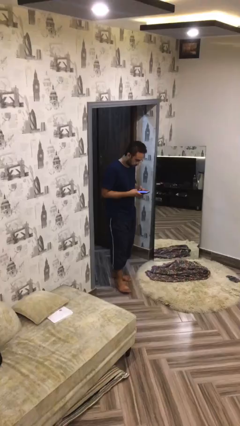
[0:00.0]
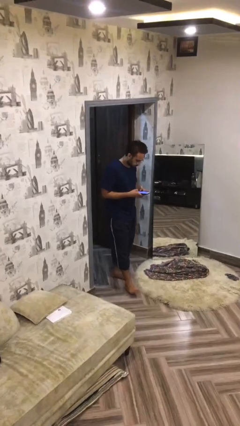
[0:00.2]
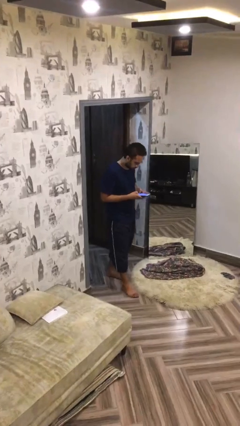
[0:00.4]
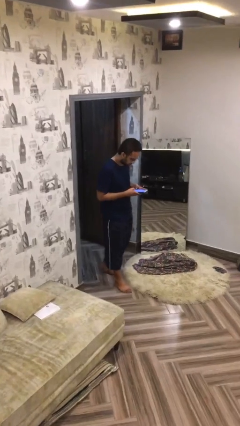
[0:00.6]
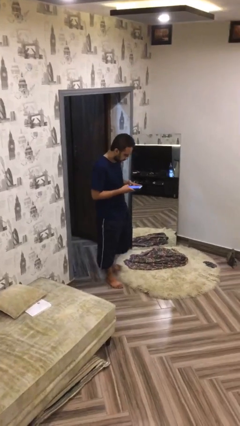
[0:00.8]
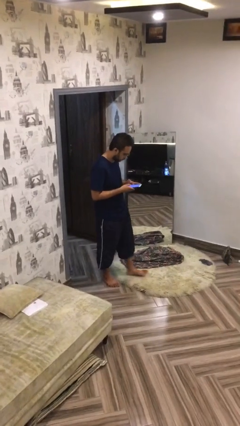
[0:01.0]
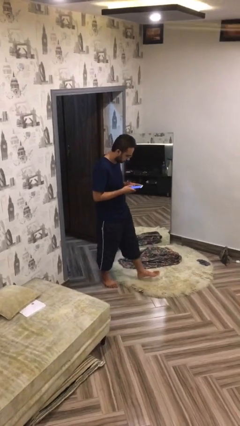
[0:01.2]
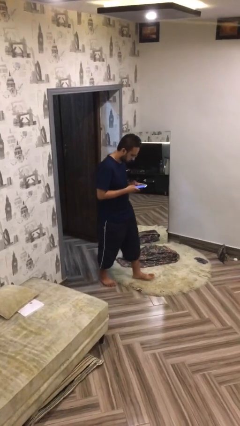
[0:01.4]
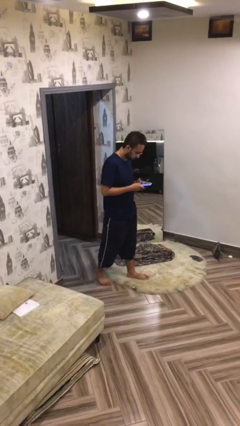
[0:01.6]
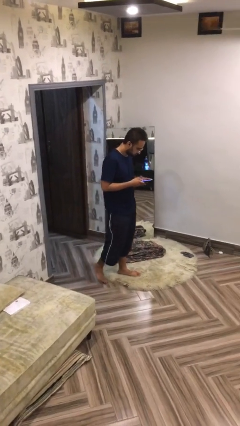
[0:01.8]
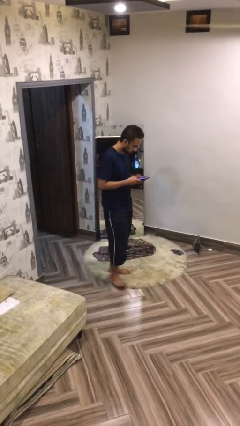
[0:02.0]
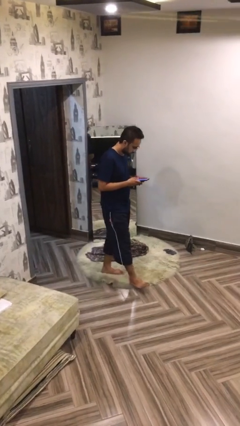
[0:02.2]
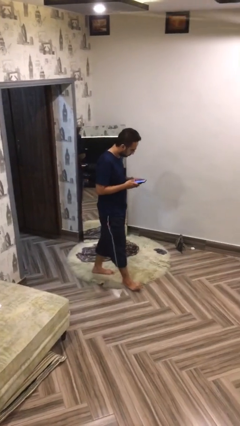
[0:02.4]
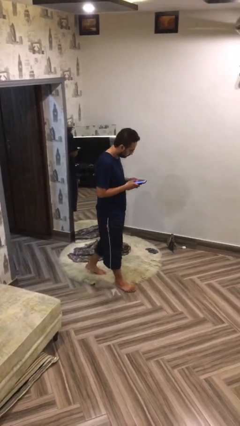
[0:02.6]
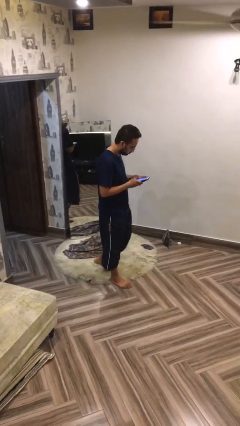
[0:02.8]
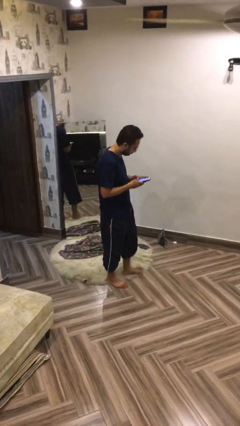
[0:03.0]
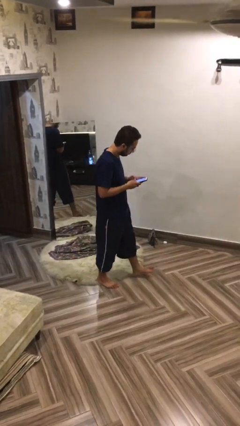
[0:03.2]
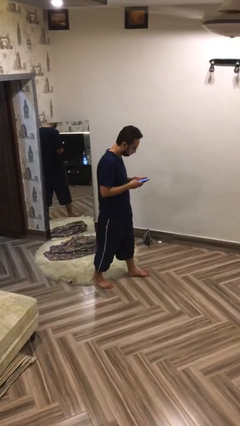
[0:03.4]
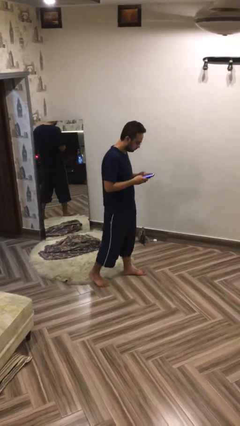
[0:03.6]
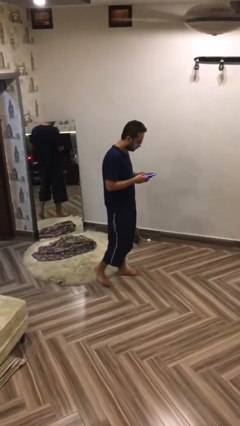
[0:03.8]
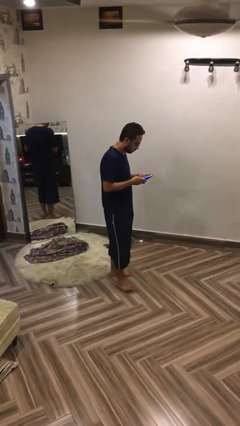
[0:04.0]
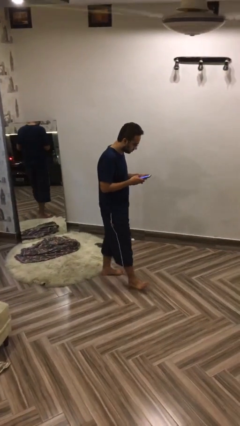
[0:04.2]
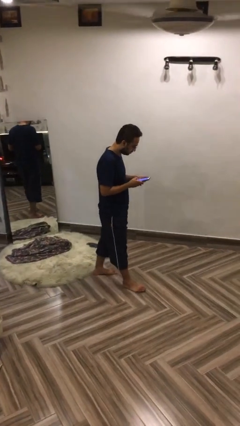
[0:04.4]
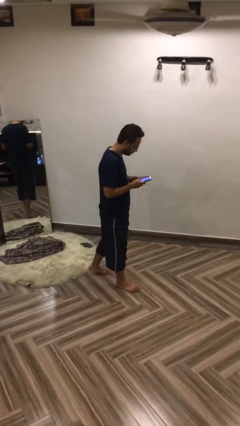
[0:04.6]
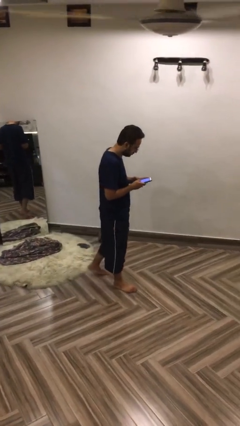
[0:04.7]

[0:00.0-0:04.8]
person texts on phone

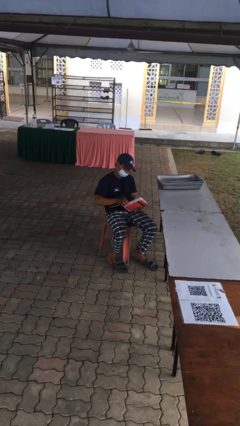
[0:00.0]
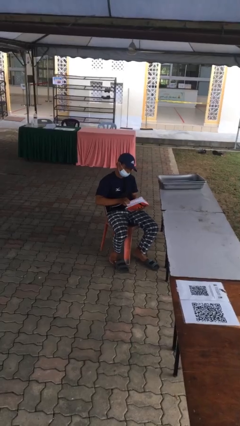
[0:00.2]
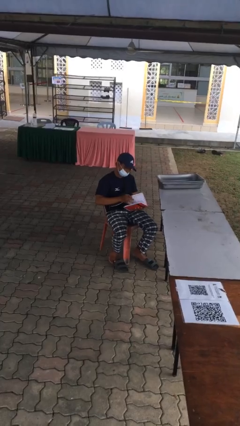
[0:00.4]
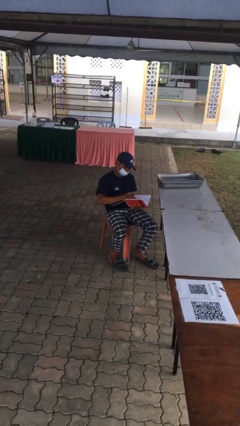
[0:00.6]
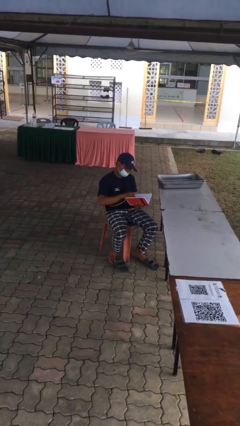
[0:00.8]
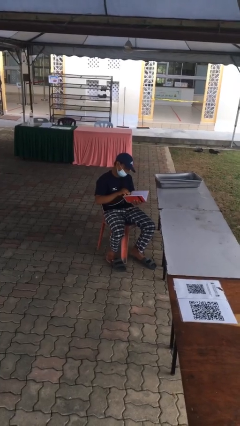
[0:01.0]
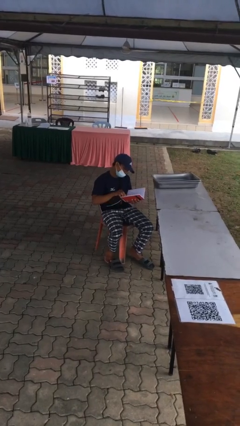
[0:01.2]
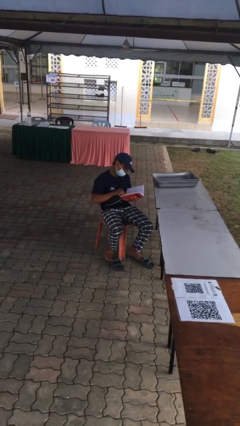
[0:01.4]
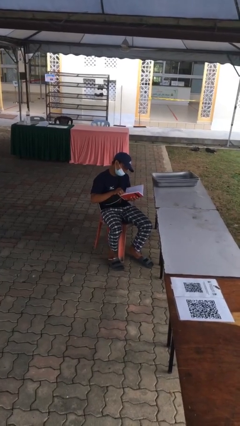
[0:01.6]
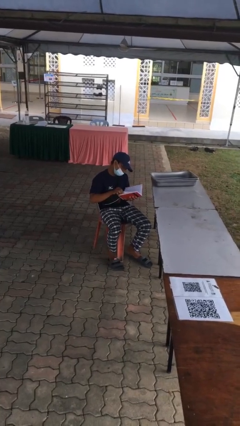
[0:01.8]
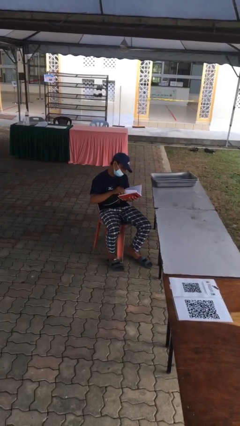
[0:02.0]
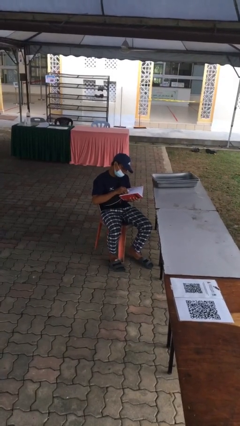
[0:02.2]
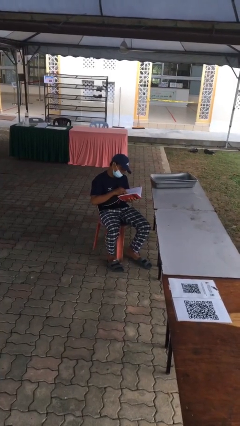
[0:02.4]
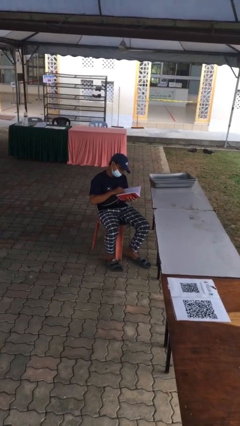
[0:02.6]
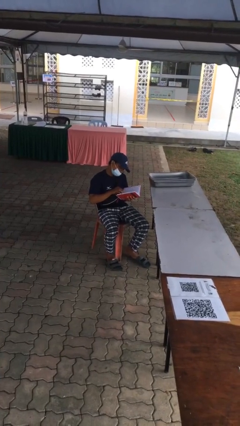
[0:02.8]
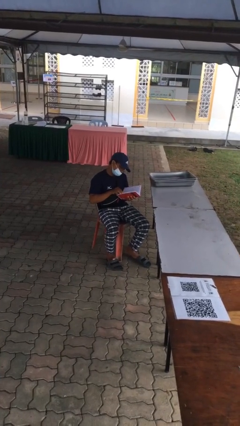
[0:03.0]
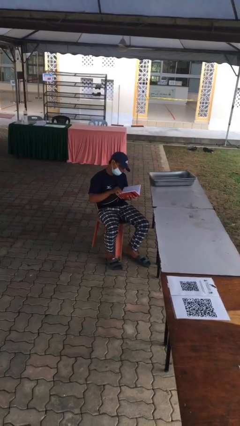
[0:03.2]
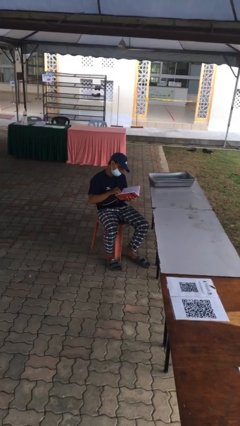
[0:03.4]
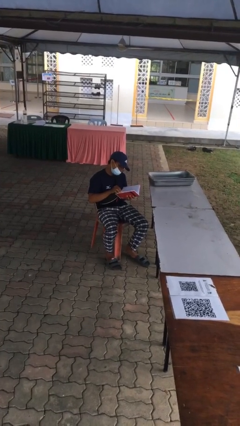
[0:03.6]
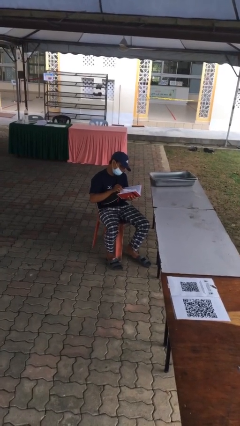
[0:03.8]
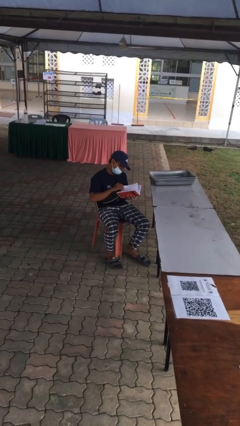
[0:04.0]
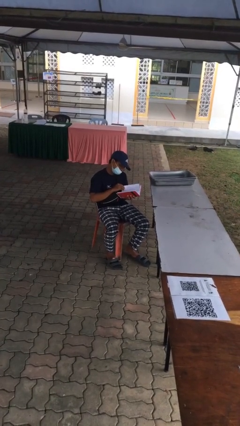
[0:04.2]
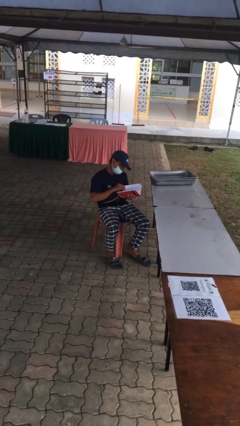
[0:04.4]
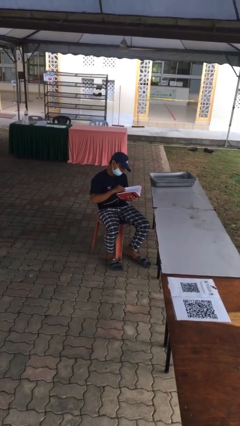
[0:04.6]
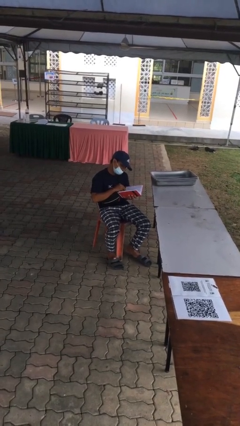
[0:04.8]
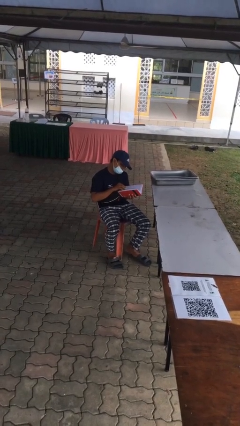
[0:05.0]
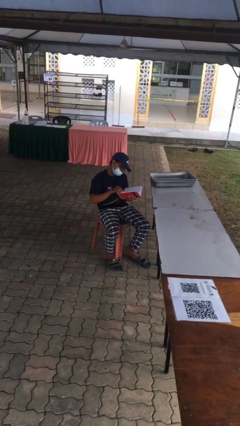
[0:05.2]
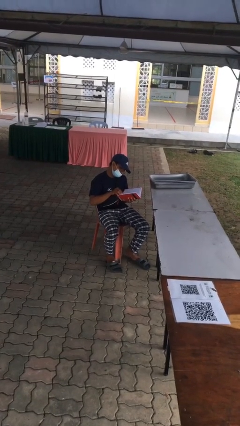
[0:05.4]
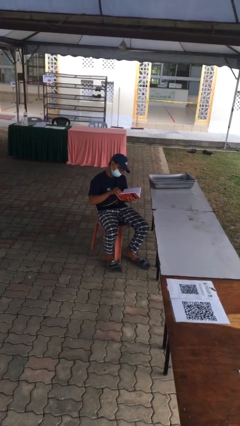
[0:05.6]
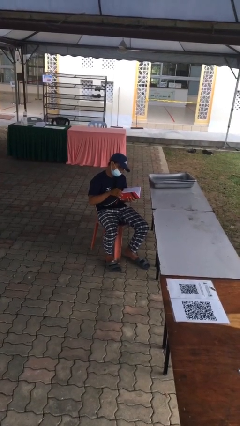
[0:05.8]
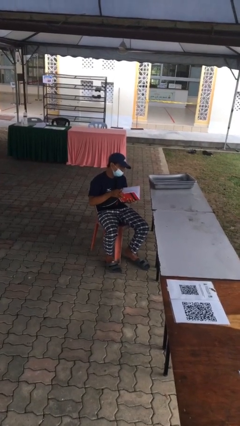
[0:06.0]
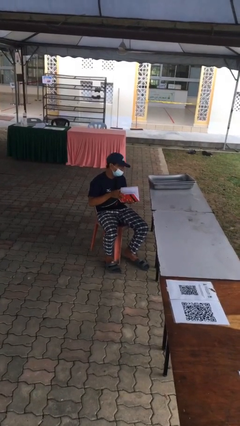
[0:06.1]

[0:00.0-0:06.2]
person reads document

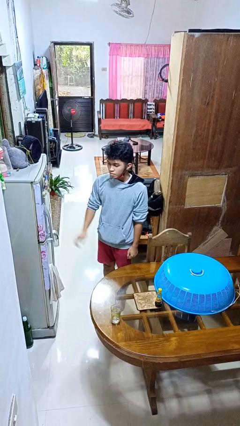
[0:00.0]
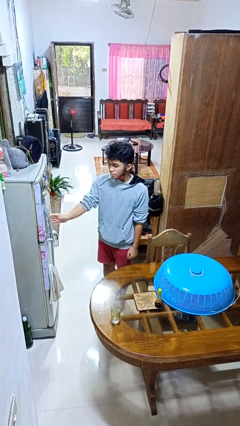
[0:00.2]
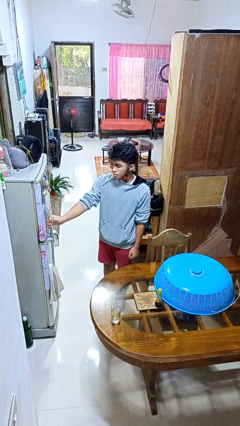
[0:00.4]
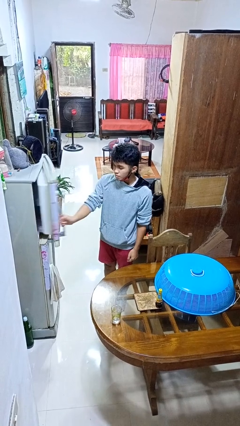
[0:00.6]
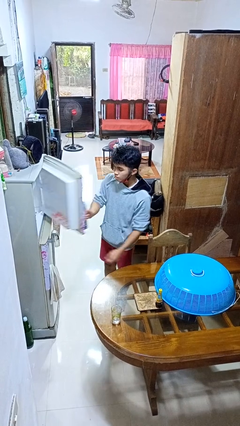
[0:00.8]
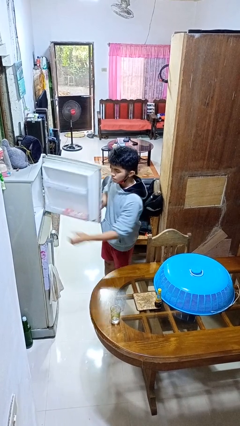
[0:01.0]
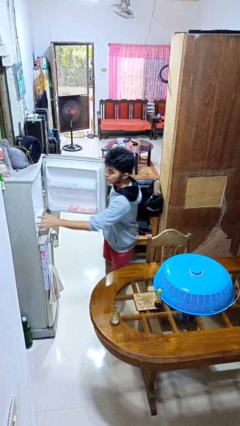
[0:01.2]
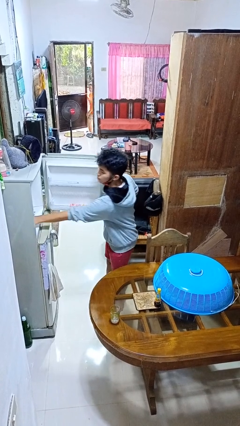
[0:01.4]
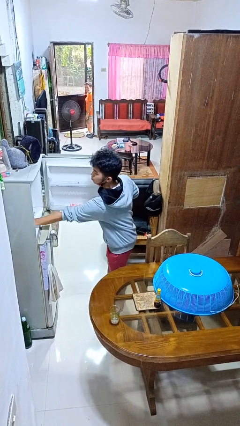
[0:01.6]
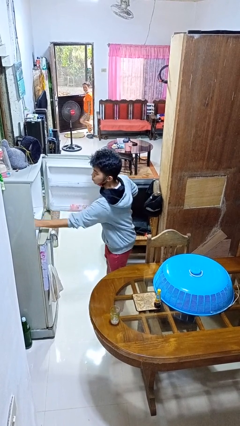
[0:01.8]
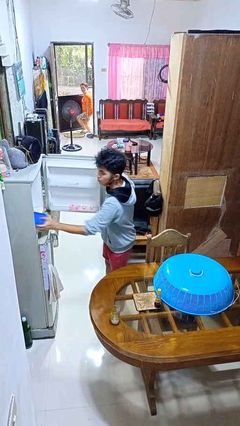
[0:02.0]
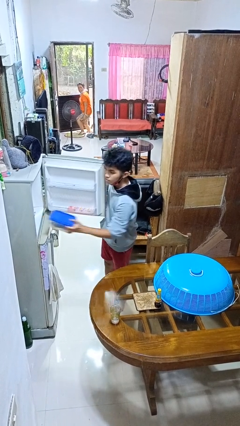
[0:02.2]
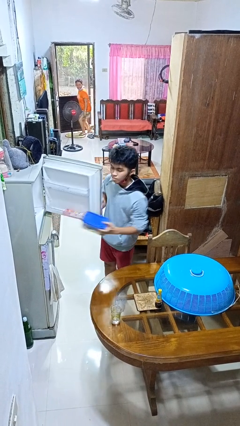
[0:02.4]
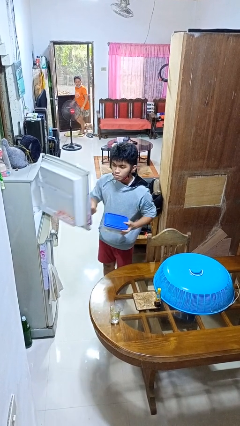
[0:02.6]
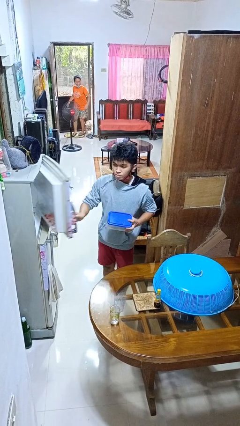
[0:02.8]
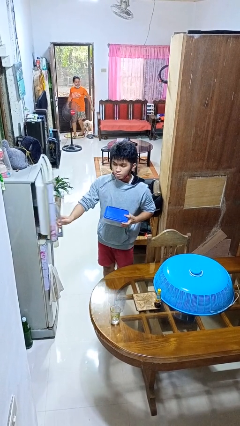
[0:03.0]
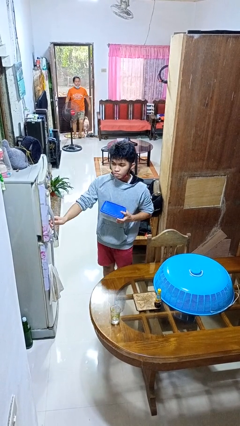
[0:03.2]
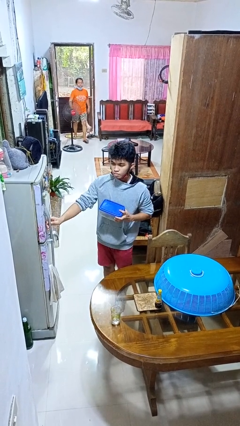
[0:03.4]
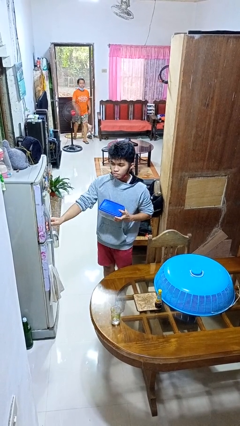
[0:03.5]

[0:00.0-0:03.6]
person takes object from refrigerator

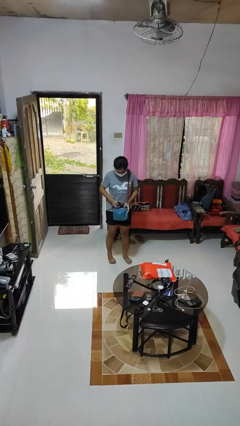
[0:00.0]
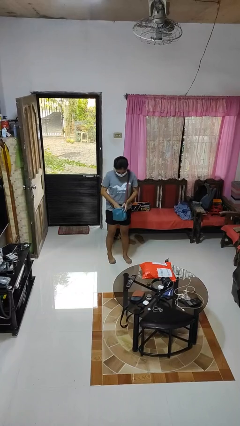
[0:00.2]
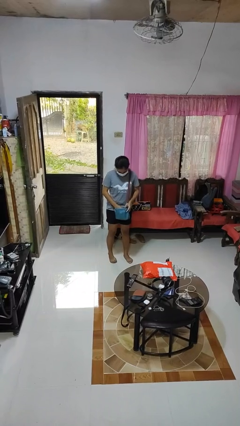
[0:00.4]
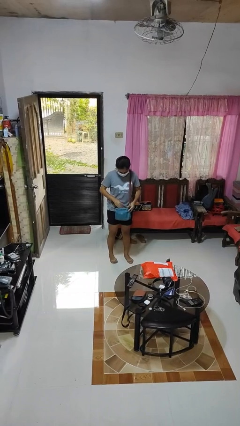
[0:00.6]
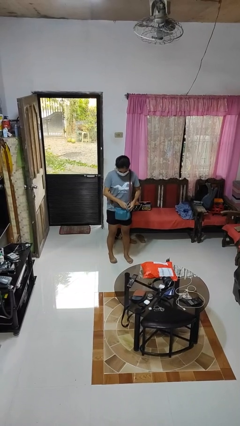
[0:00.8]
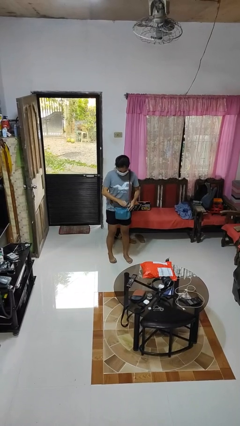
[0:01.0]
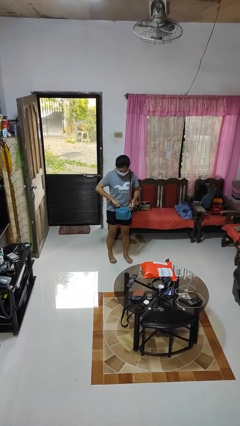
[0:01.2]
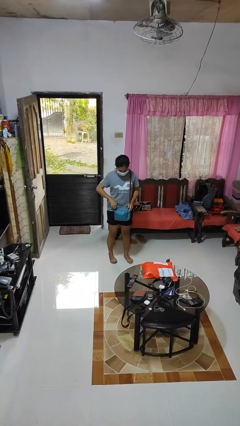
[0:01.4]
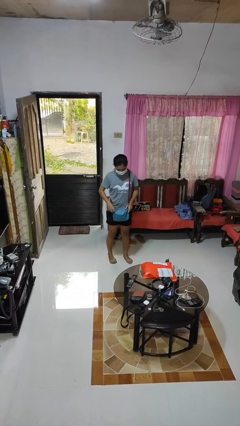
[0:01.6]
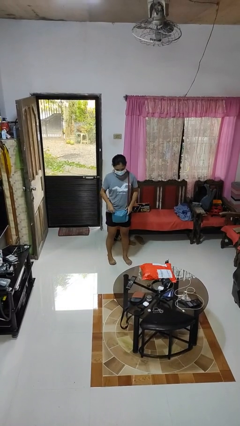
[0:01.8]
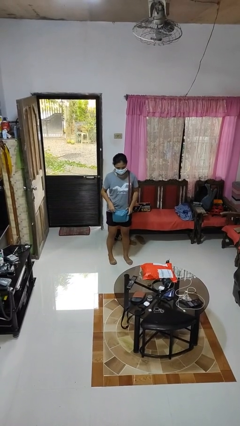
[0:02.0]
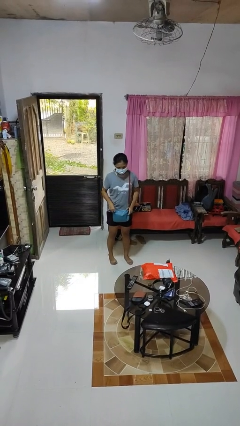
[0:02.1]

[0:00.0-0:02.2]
person puts object into purse

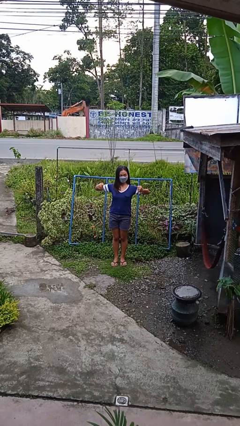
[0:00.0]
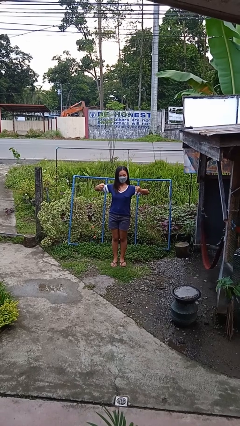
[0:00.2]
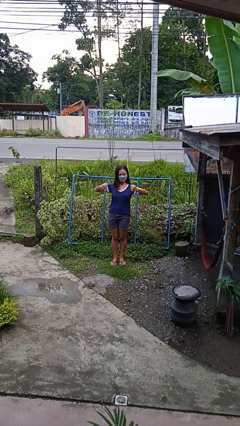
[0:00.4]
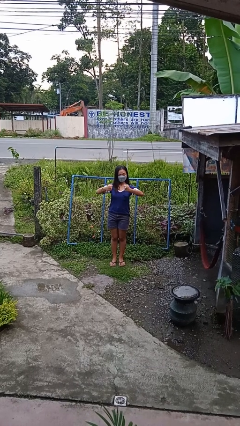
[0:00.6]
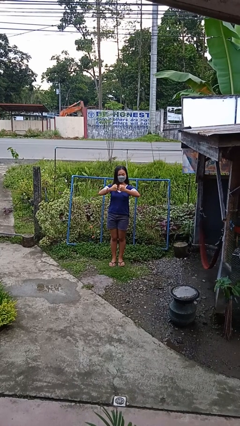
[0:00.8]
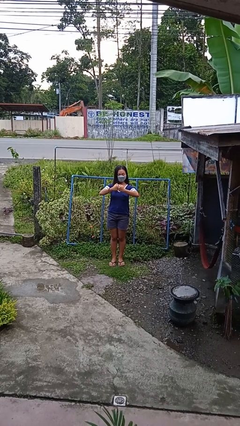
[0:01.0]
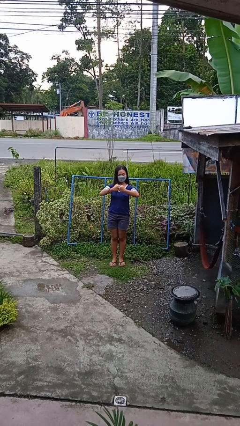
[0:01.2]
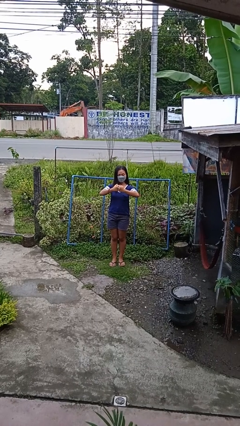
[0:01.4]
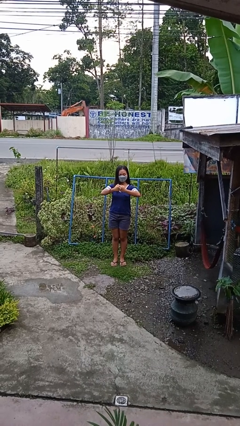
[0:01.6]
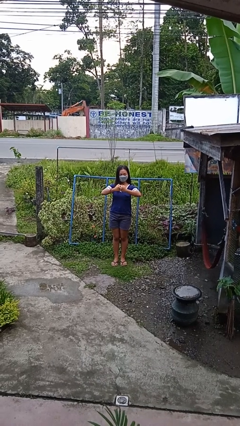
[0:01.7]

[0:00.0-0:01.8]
person gestures zoom out
